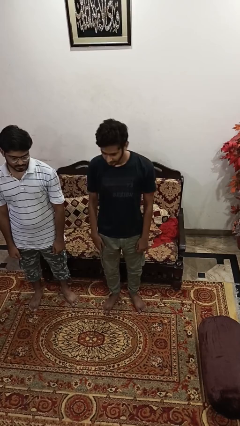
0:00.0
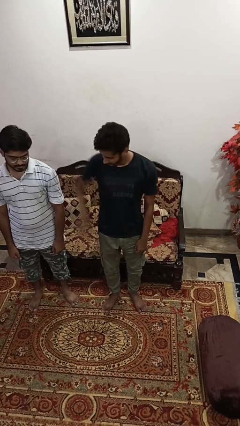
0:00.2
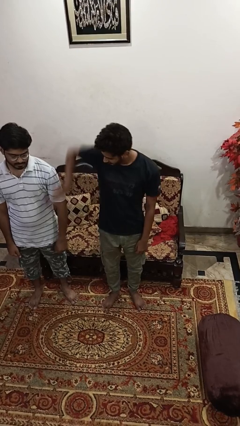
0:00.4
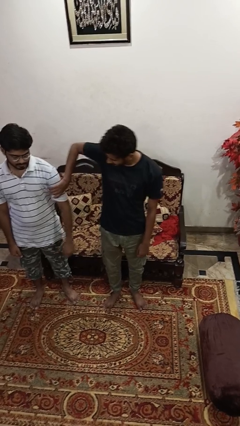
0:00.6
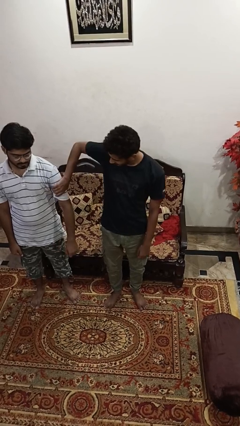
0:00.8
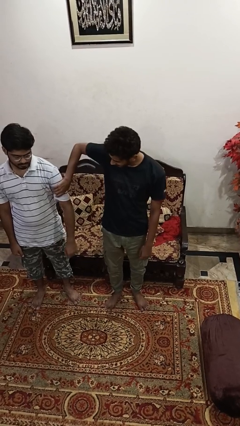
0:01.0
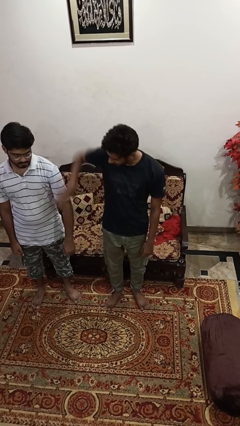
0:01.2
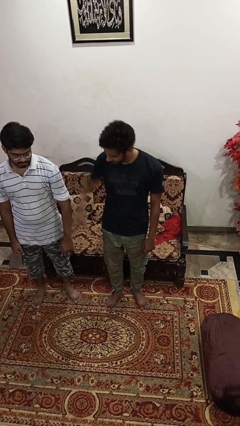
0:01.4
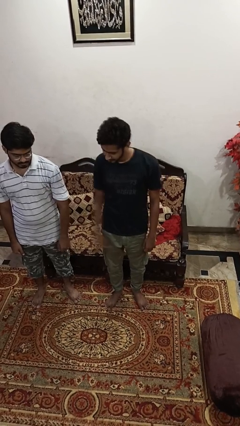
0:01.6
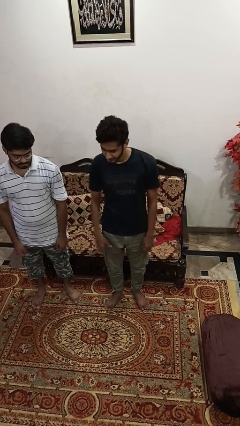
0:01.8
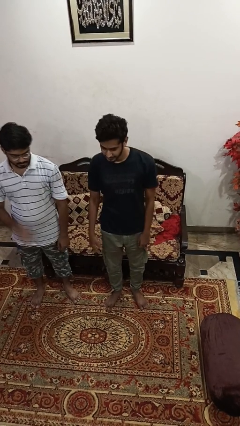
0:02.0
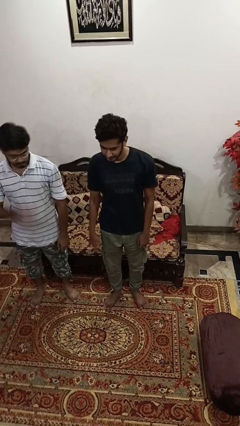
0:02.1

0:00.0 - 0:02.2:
person grabs person by bicep

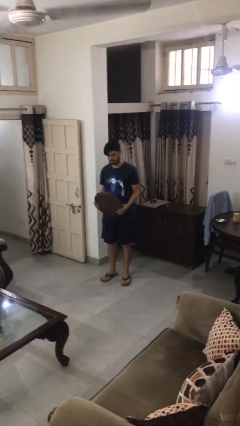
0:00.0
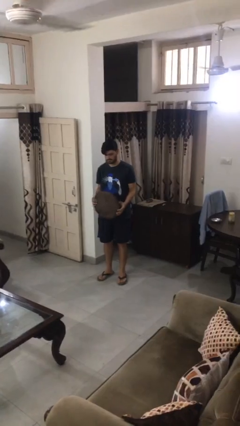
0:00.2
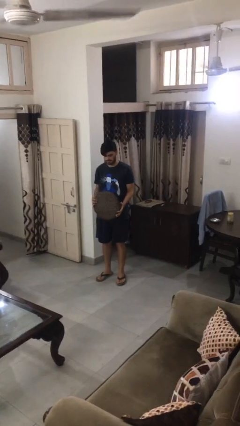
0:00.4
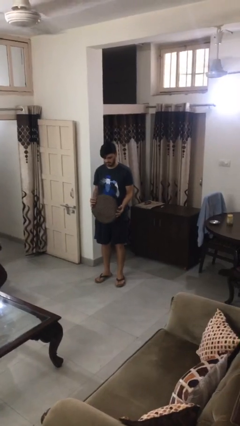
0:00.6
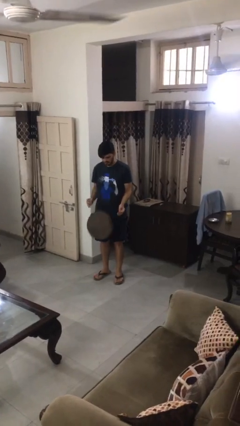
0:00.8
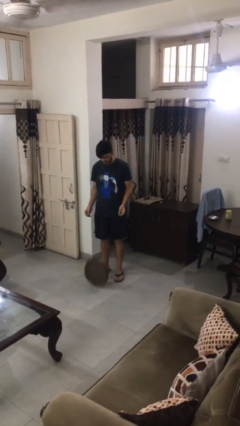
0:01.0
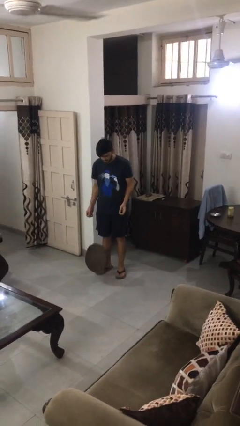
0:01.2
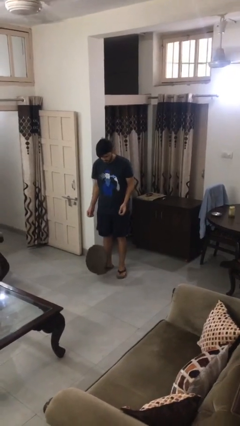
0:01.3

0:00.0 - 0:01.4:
person drops object

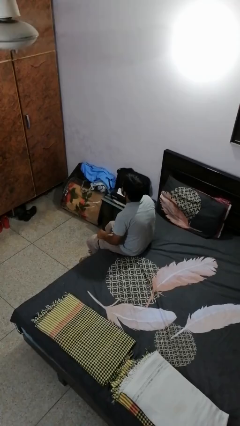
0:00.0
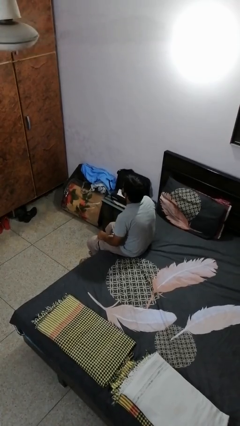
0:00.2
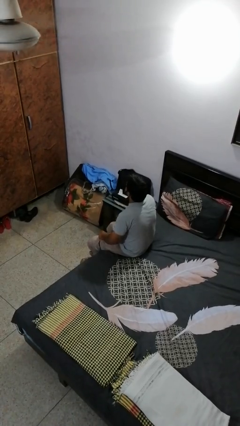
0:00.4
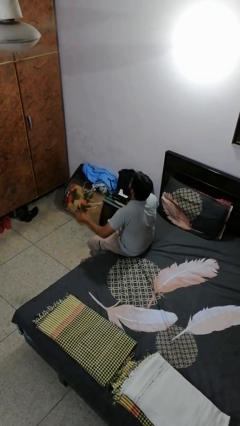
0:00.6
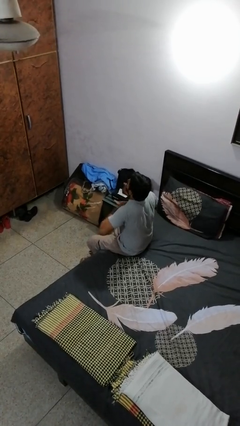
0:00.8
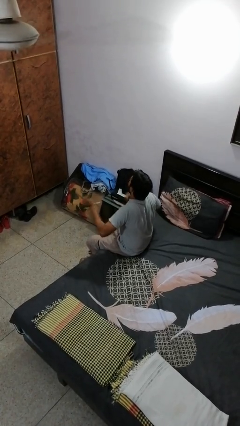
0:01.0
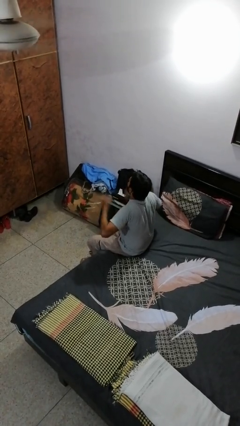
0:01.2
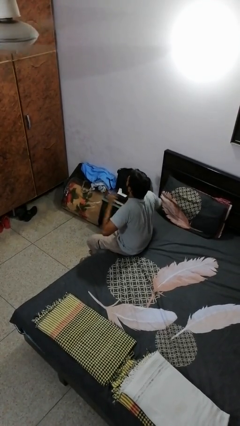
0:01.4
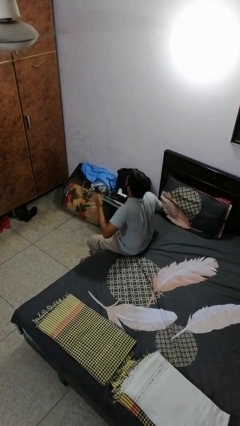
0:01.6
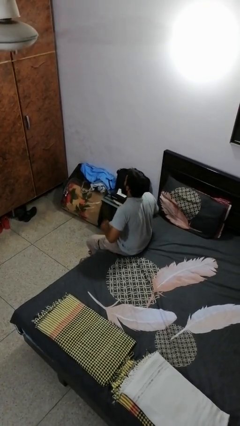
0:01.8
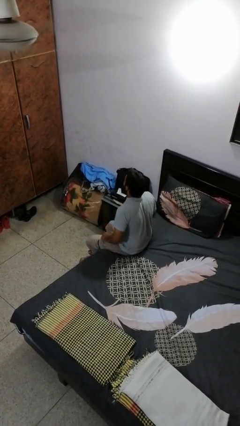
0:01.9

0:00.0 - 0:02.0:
person drums on chest

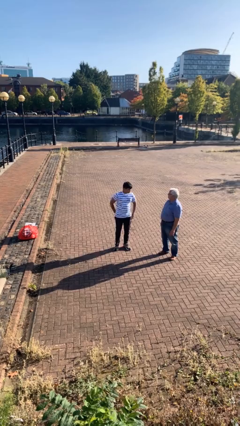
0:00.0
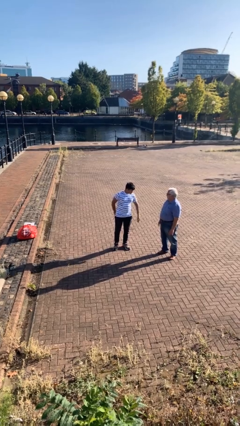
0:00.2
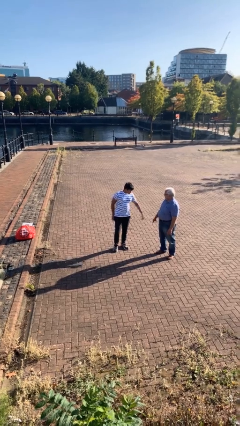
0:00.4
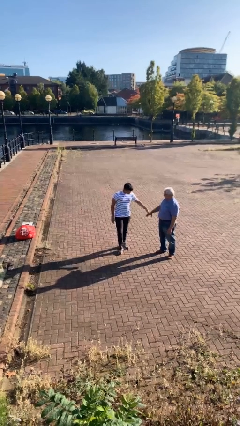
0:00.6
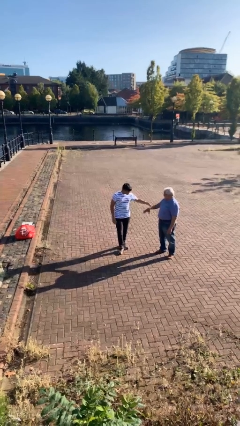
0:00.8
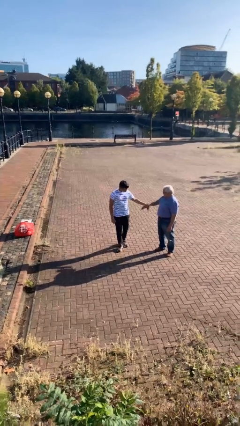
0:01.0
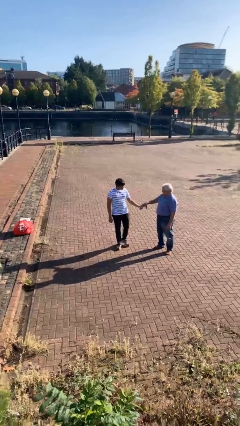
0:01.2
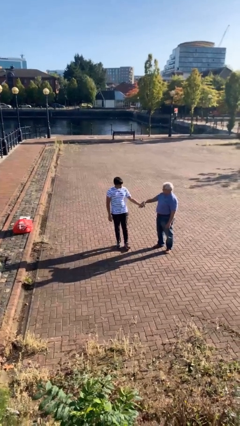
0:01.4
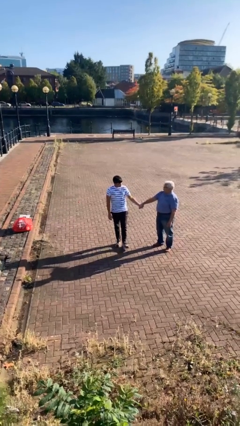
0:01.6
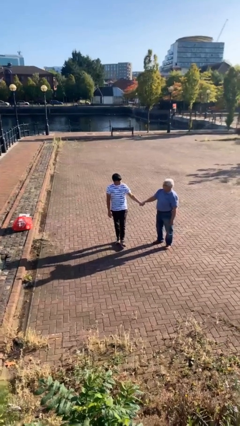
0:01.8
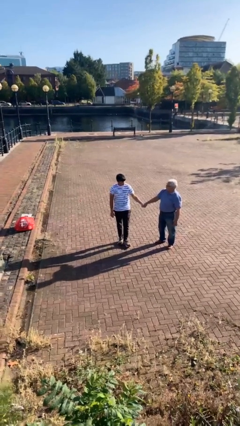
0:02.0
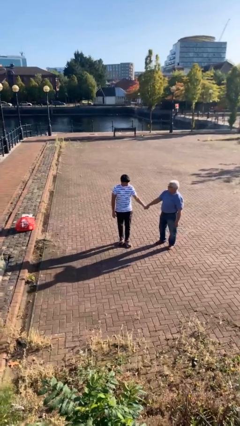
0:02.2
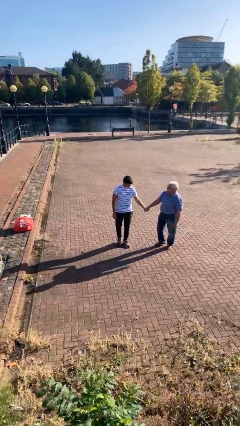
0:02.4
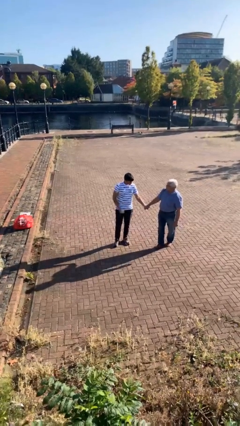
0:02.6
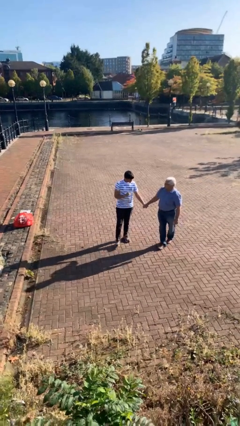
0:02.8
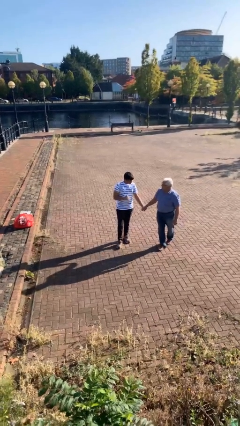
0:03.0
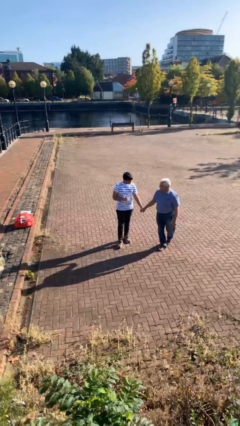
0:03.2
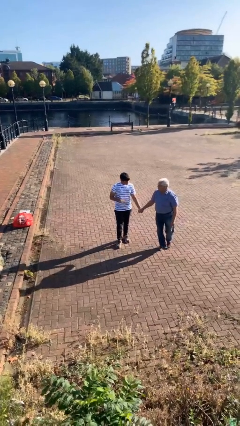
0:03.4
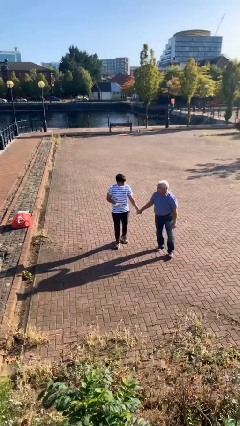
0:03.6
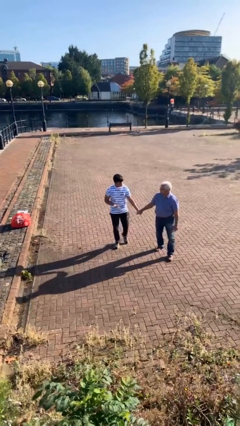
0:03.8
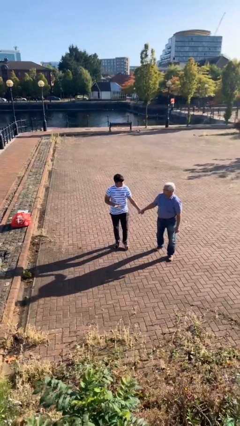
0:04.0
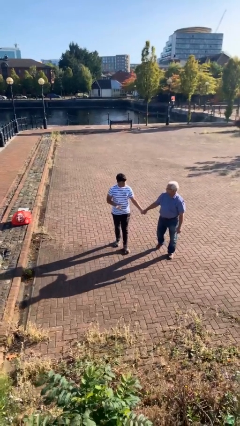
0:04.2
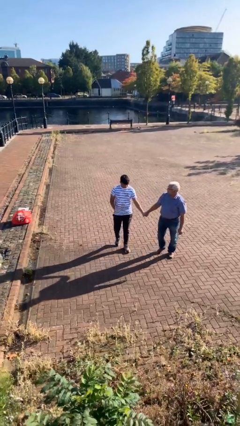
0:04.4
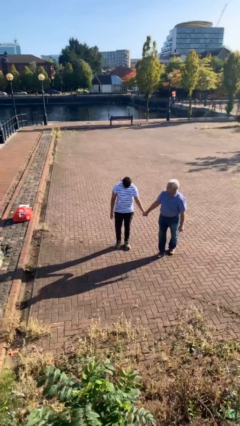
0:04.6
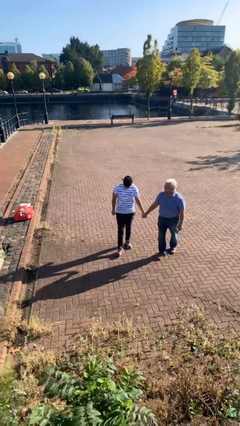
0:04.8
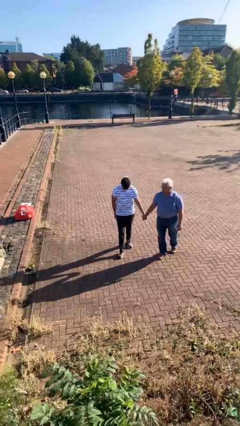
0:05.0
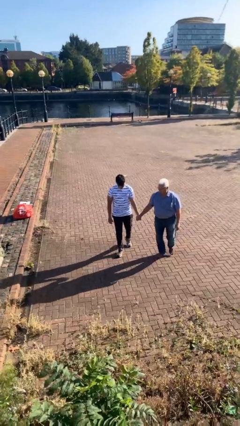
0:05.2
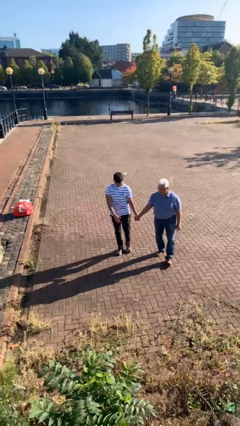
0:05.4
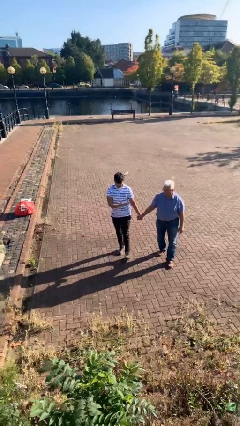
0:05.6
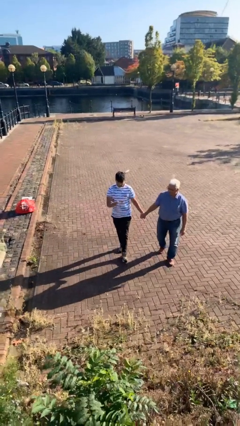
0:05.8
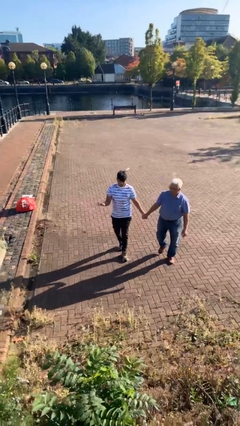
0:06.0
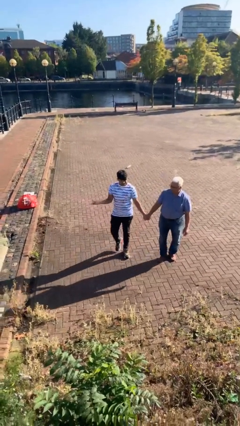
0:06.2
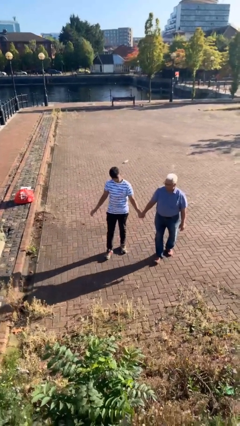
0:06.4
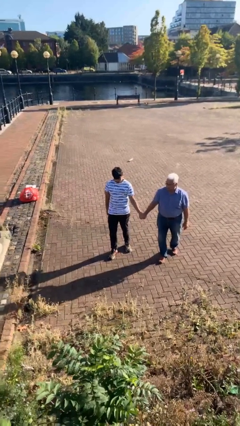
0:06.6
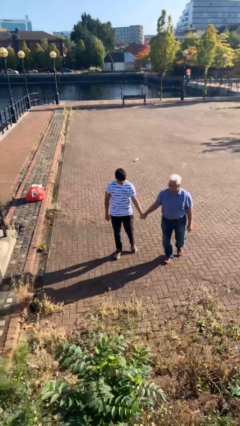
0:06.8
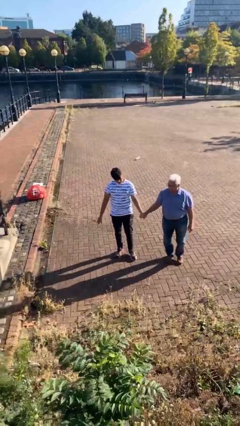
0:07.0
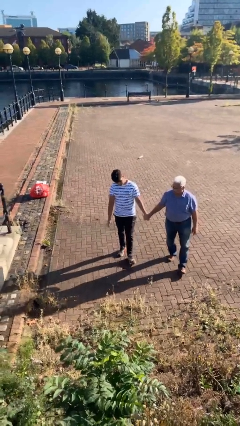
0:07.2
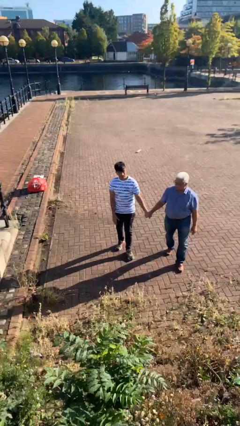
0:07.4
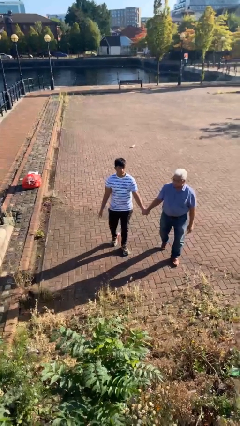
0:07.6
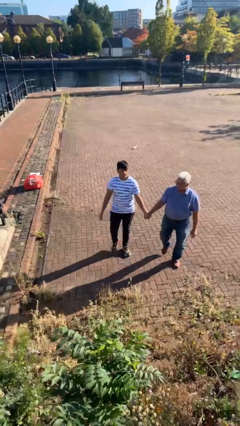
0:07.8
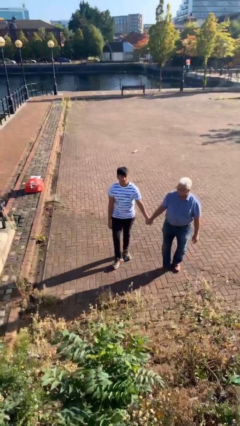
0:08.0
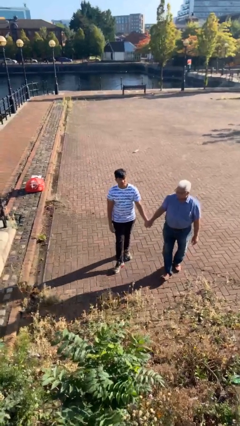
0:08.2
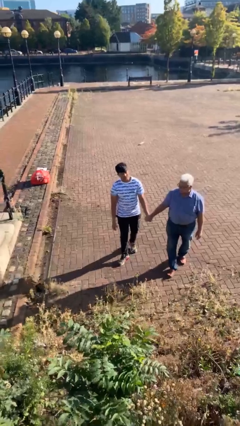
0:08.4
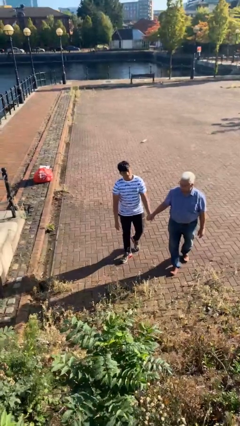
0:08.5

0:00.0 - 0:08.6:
person holds hand

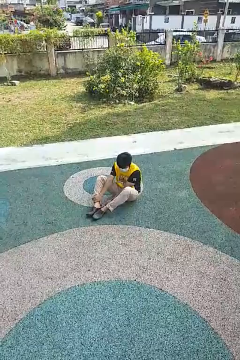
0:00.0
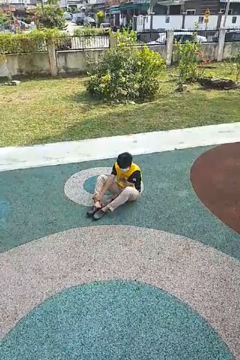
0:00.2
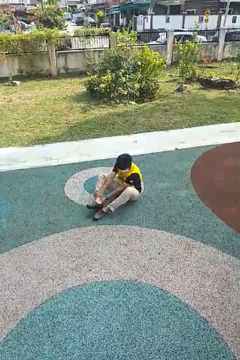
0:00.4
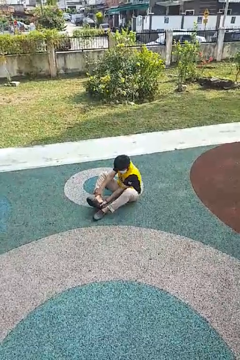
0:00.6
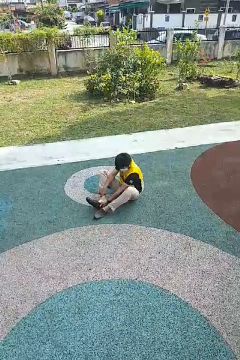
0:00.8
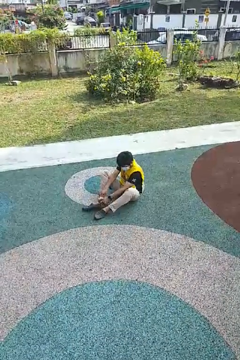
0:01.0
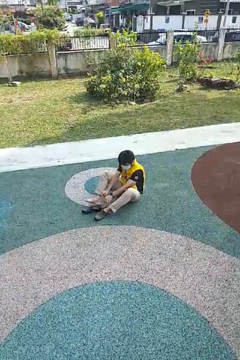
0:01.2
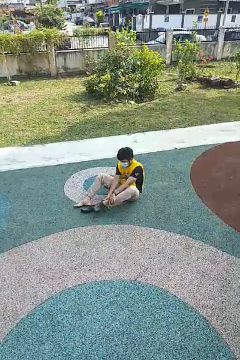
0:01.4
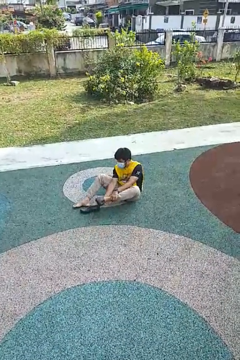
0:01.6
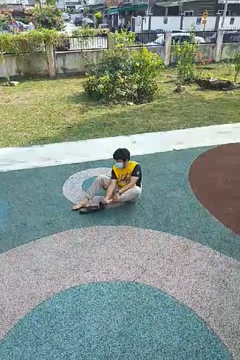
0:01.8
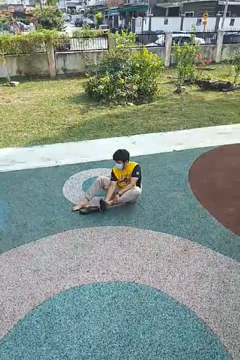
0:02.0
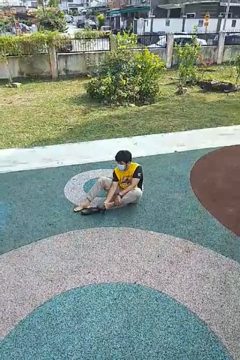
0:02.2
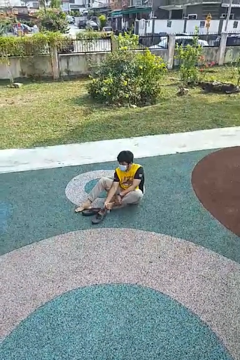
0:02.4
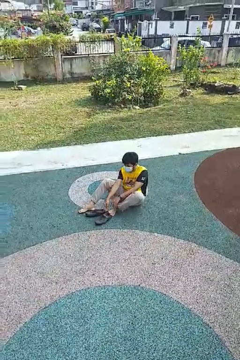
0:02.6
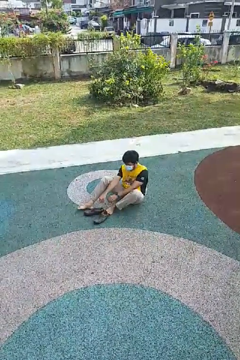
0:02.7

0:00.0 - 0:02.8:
person takes off shoes

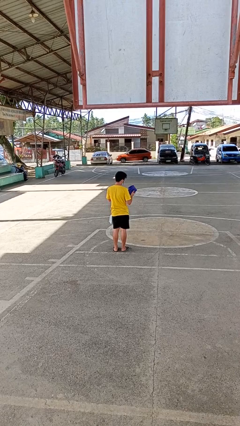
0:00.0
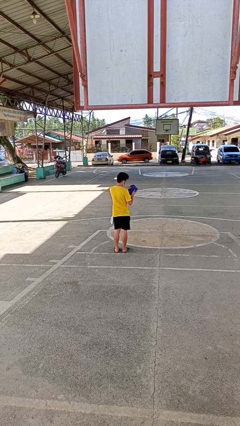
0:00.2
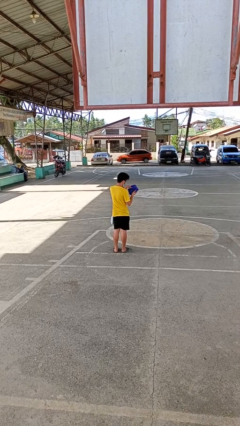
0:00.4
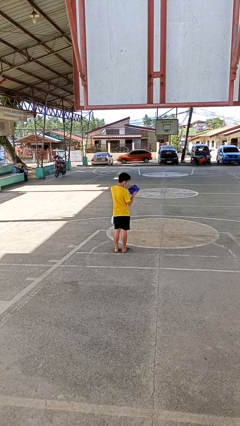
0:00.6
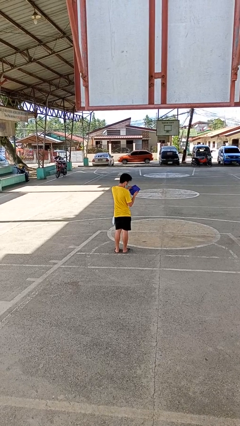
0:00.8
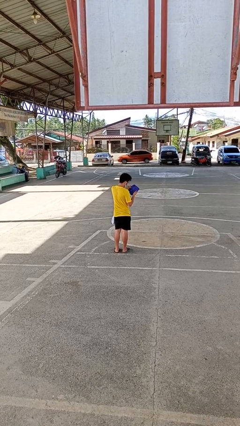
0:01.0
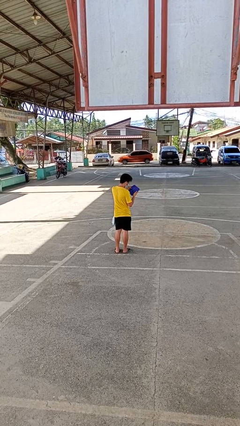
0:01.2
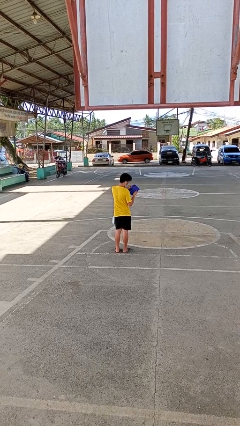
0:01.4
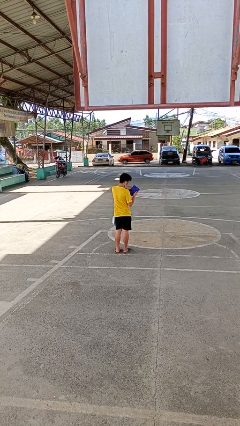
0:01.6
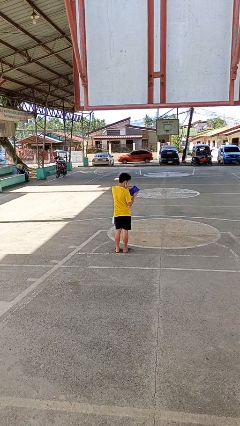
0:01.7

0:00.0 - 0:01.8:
person searches in purse
